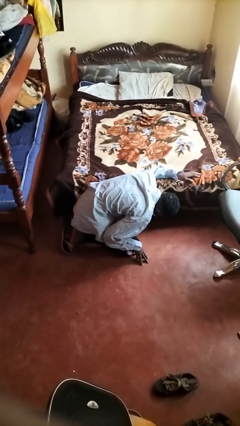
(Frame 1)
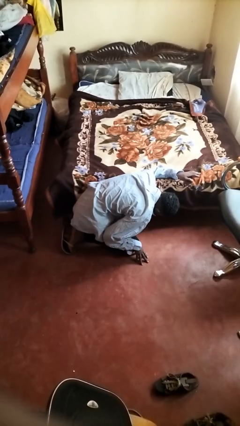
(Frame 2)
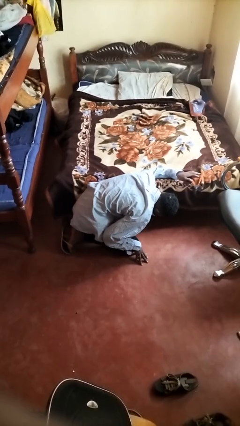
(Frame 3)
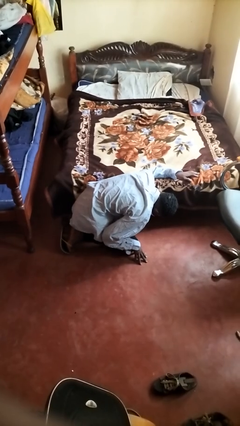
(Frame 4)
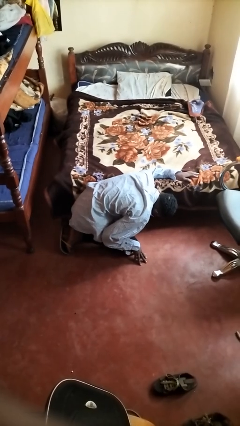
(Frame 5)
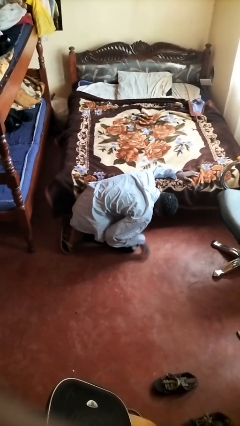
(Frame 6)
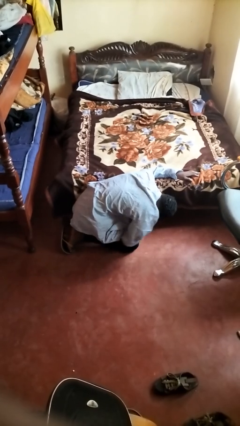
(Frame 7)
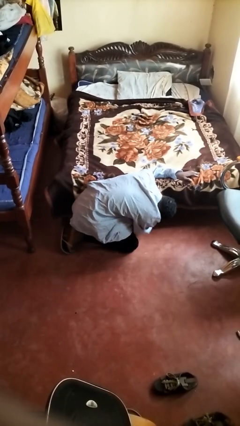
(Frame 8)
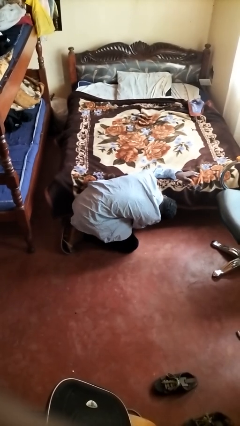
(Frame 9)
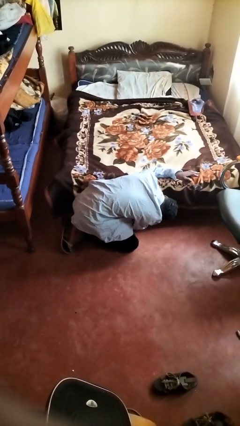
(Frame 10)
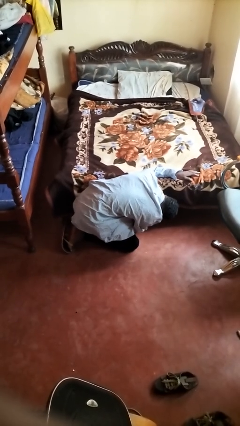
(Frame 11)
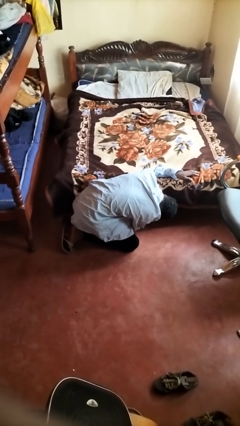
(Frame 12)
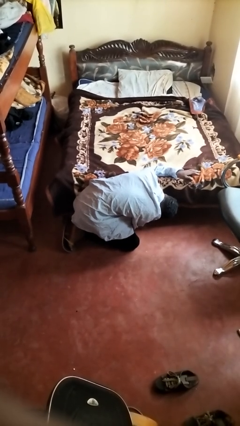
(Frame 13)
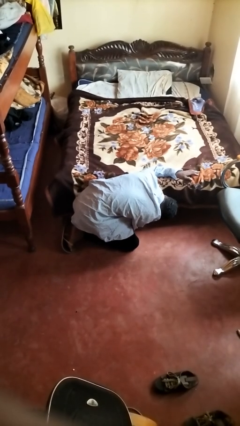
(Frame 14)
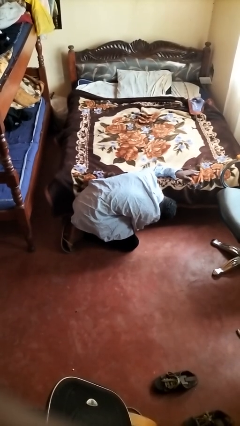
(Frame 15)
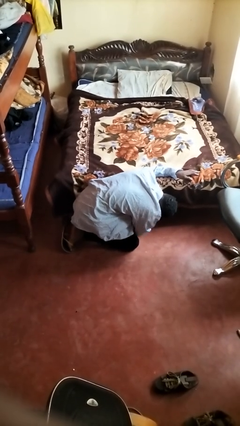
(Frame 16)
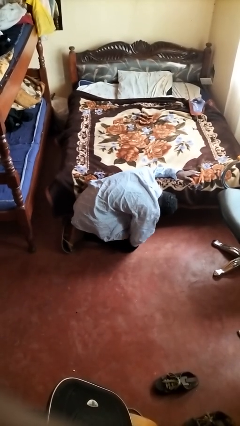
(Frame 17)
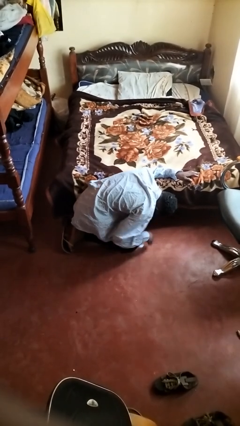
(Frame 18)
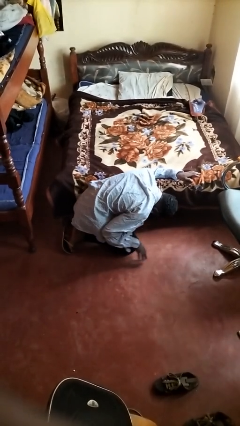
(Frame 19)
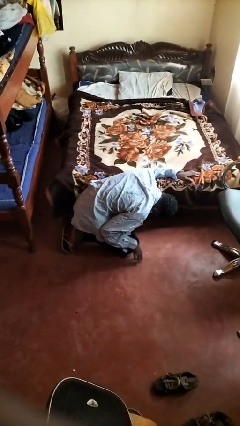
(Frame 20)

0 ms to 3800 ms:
person searches under bed

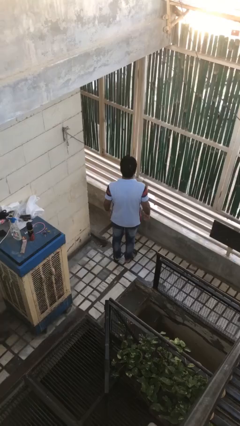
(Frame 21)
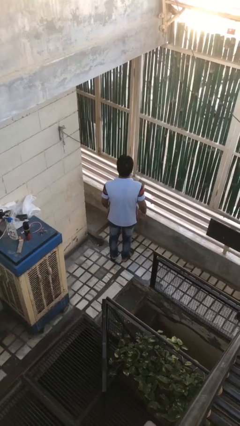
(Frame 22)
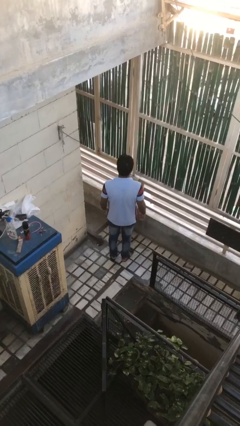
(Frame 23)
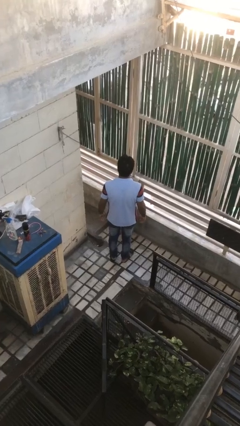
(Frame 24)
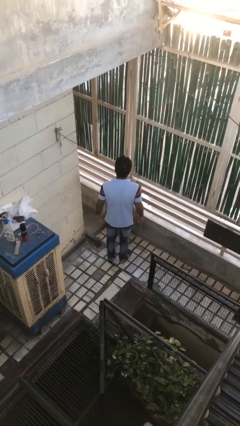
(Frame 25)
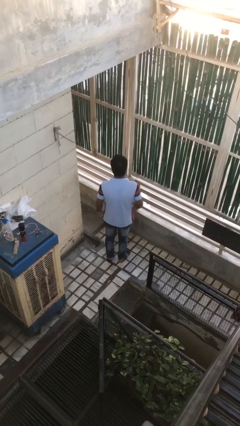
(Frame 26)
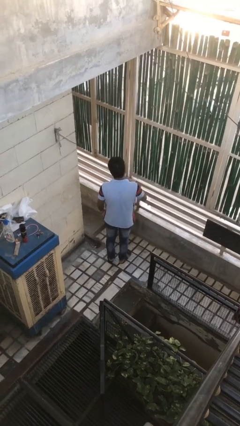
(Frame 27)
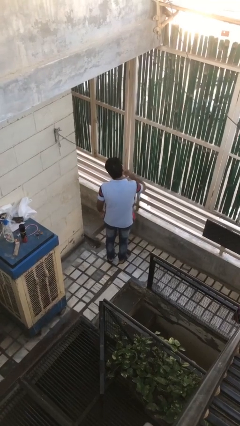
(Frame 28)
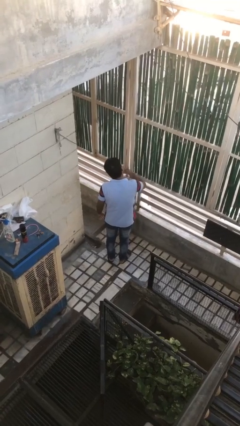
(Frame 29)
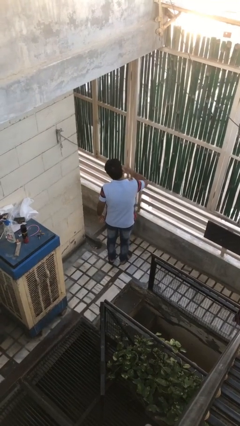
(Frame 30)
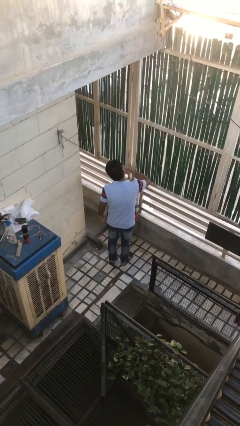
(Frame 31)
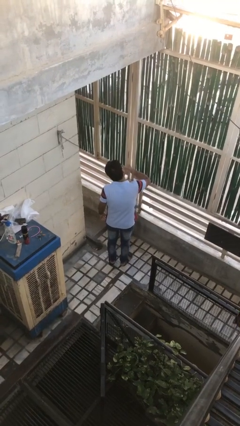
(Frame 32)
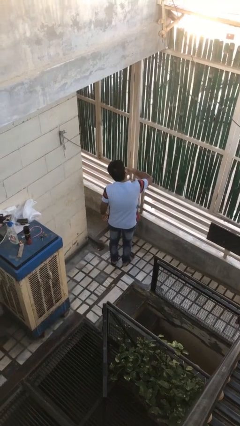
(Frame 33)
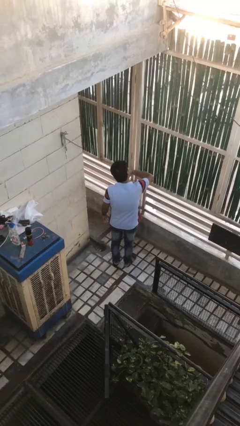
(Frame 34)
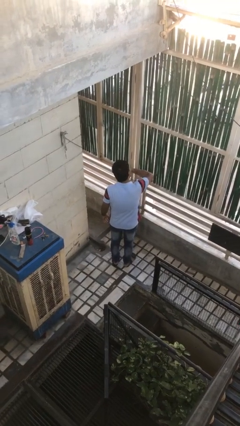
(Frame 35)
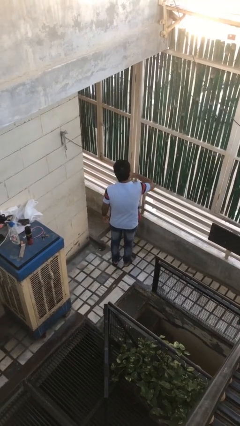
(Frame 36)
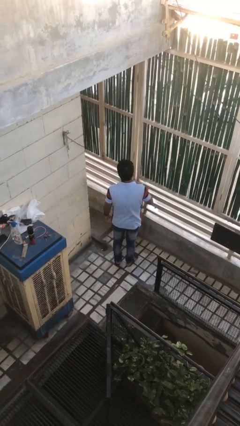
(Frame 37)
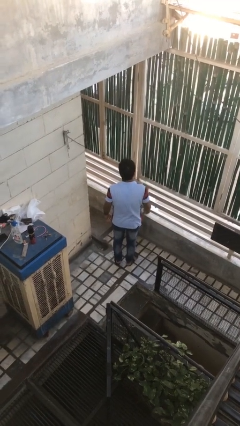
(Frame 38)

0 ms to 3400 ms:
person licks fingers

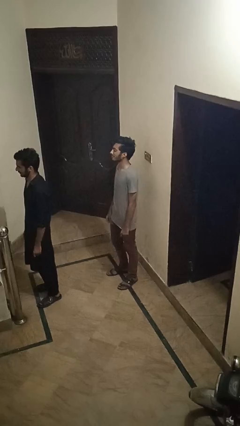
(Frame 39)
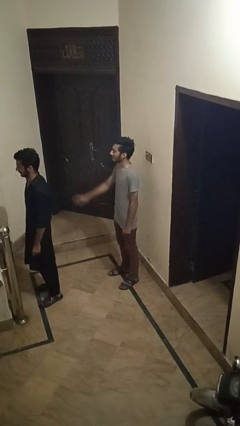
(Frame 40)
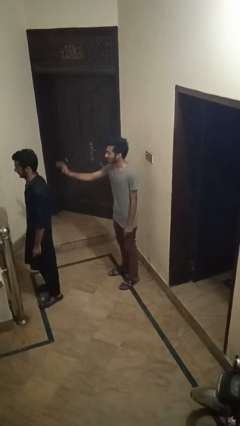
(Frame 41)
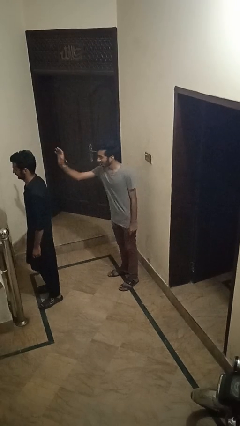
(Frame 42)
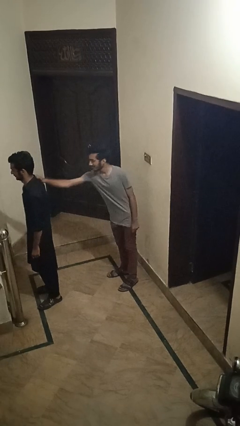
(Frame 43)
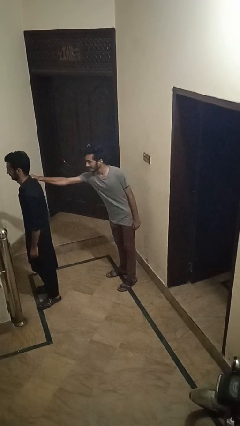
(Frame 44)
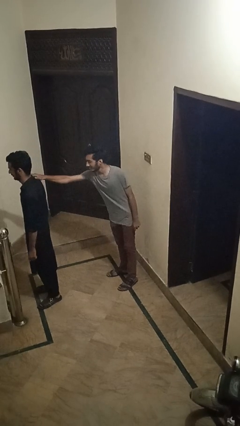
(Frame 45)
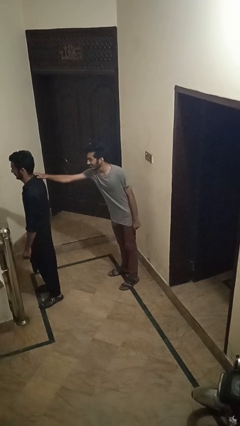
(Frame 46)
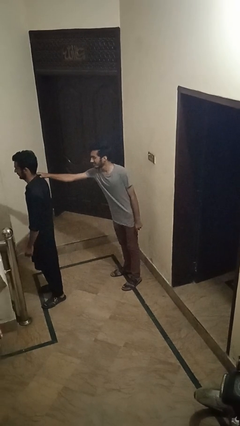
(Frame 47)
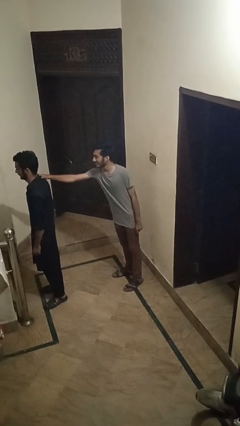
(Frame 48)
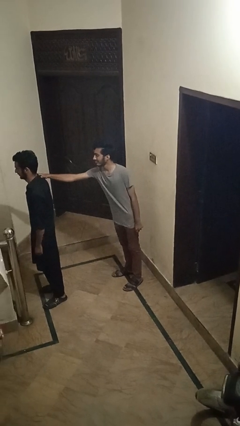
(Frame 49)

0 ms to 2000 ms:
person grabs person by shoulder

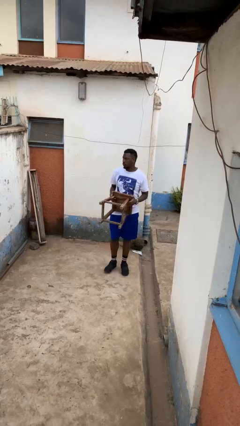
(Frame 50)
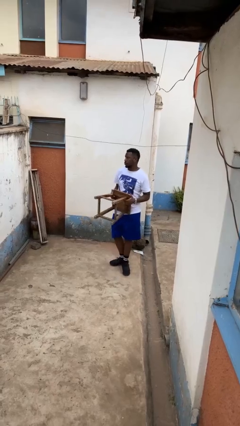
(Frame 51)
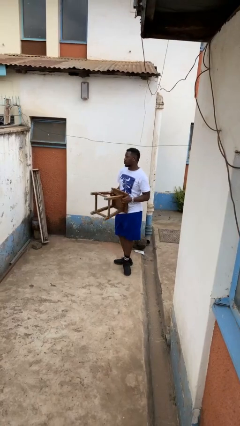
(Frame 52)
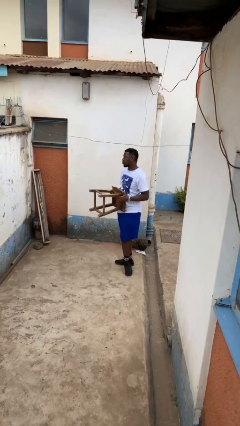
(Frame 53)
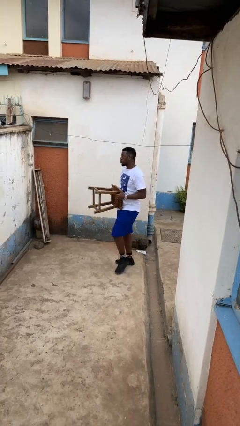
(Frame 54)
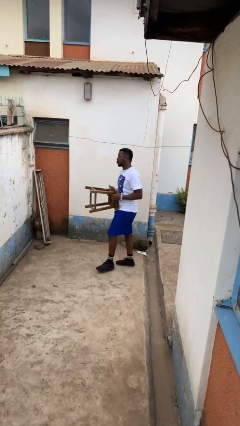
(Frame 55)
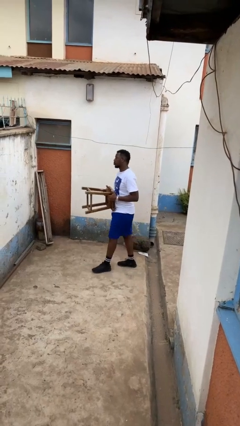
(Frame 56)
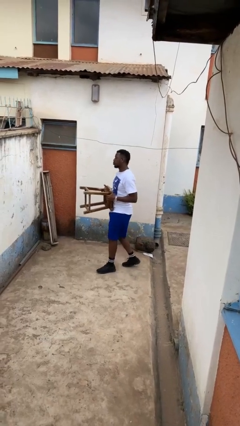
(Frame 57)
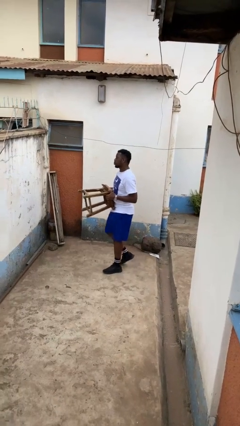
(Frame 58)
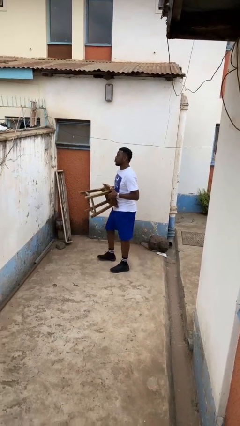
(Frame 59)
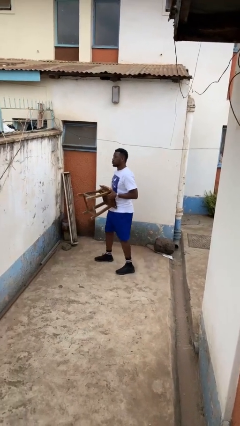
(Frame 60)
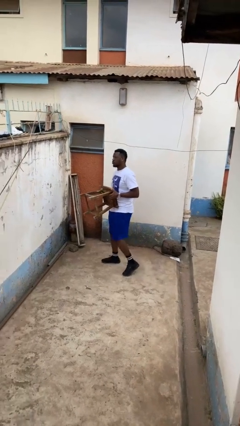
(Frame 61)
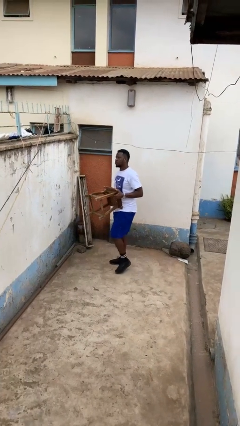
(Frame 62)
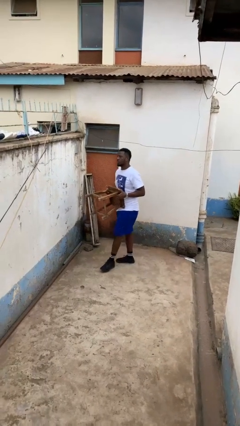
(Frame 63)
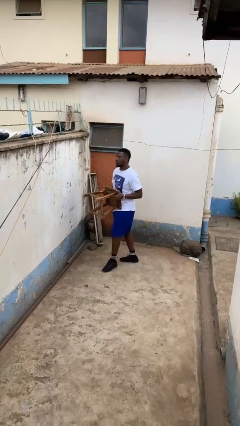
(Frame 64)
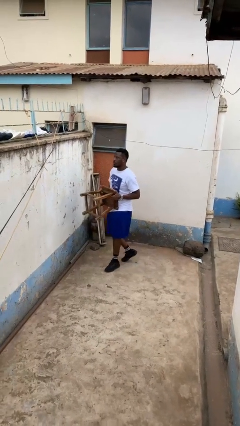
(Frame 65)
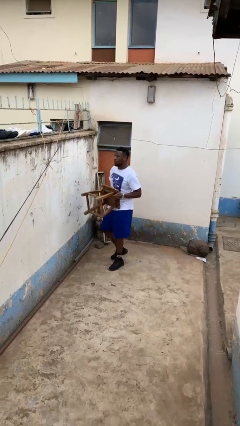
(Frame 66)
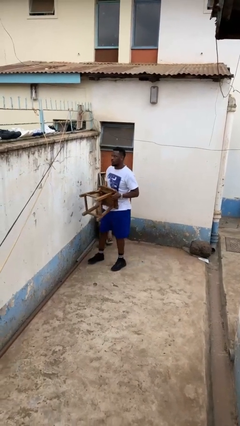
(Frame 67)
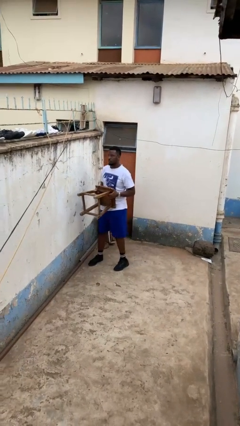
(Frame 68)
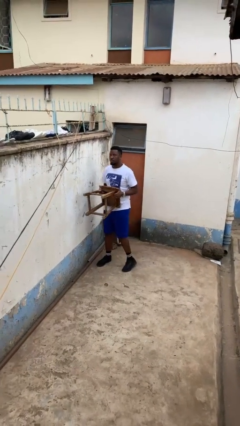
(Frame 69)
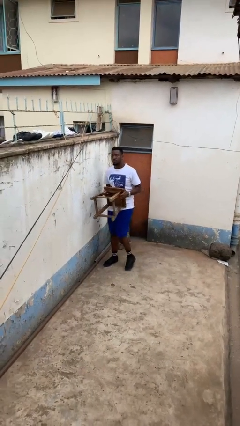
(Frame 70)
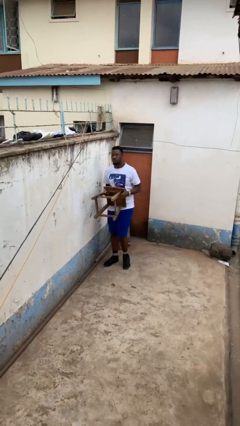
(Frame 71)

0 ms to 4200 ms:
person carries furniture

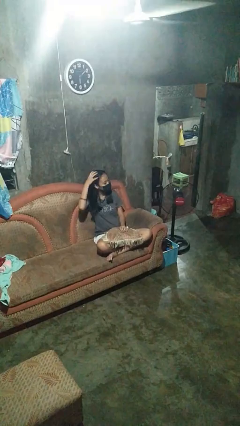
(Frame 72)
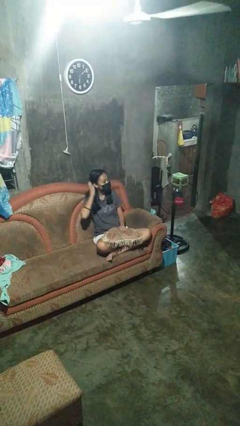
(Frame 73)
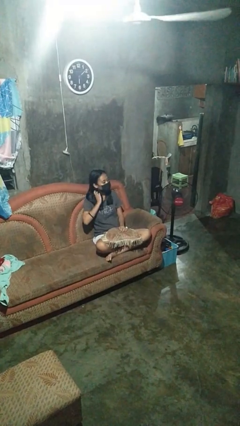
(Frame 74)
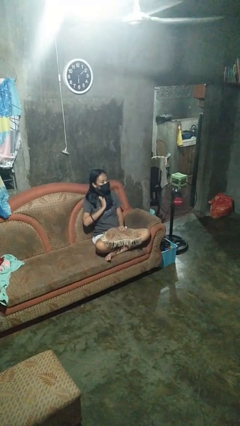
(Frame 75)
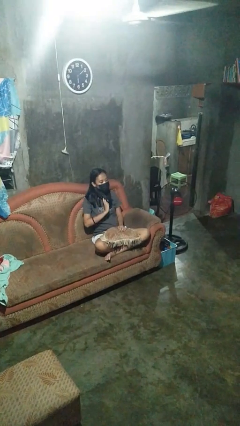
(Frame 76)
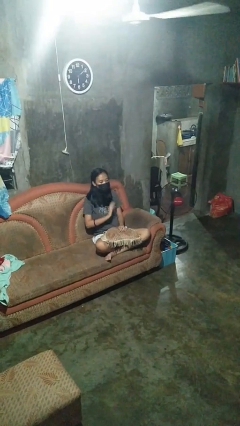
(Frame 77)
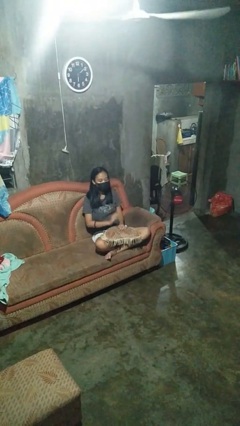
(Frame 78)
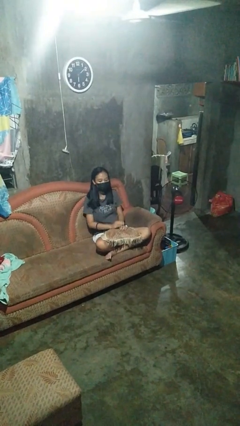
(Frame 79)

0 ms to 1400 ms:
person strokes hair

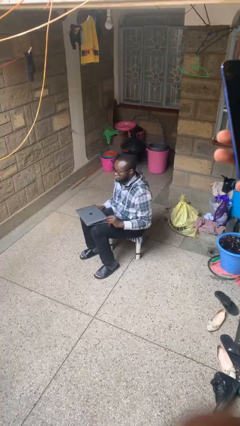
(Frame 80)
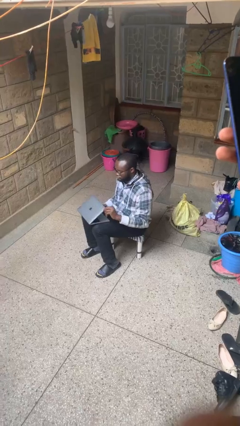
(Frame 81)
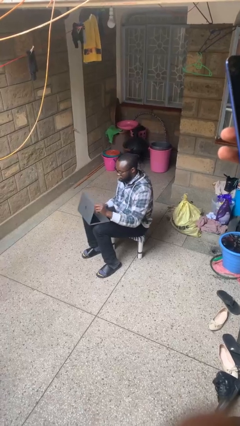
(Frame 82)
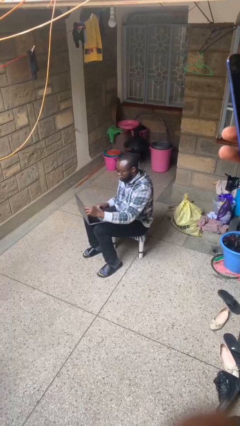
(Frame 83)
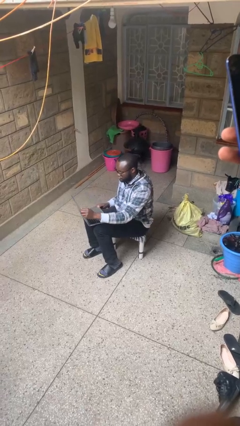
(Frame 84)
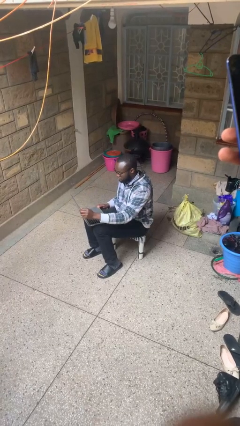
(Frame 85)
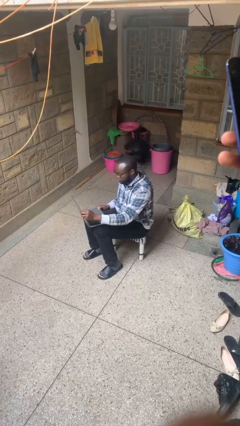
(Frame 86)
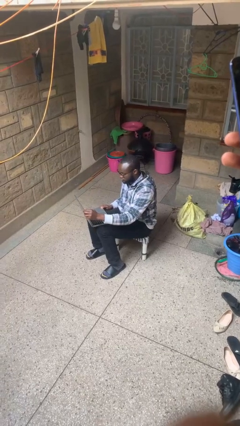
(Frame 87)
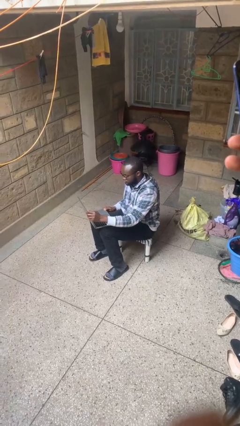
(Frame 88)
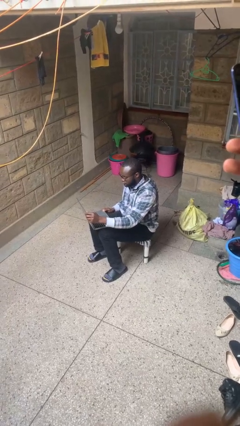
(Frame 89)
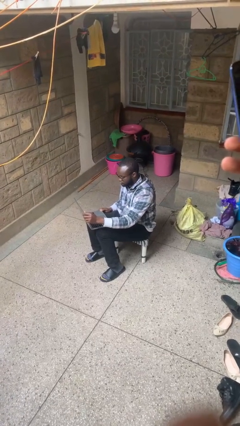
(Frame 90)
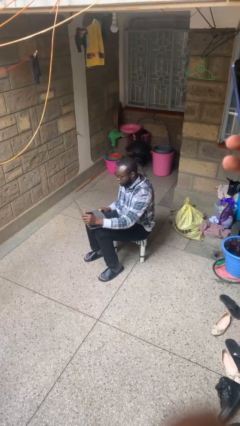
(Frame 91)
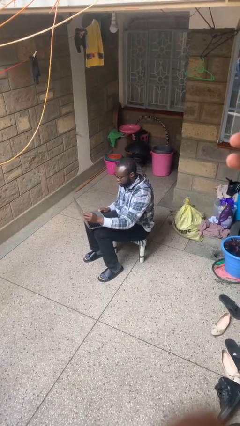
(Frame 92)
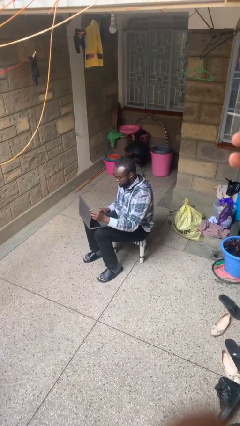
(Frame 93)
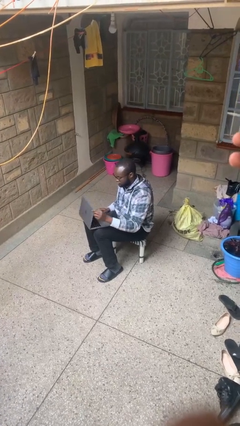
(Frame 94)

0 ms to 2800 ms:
person opens laptop
